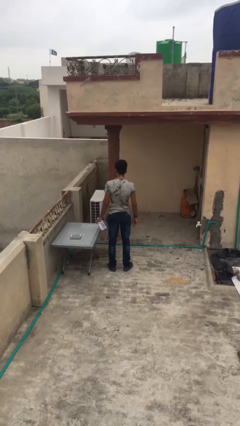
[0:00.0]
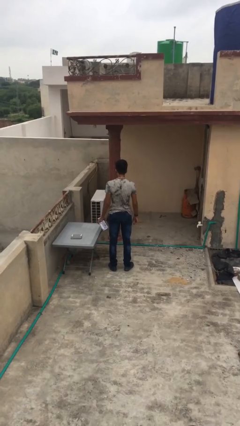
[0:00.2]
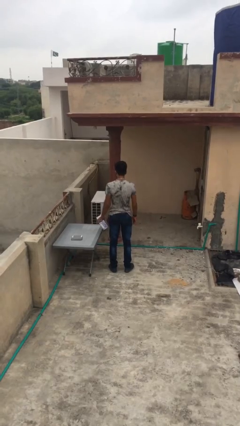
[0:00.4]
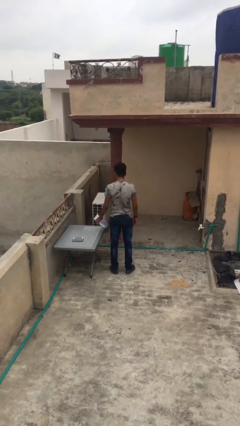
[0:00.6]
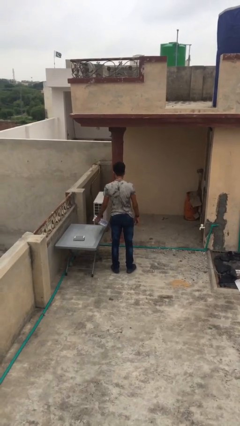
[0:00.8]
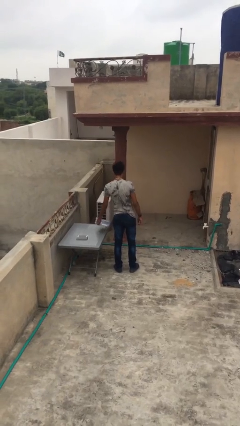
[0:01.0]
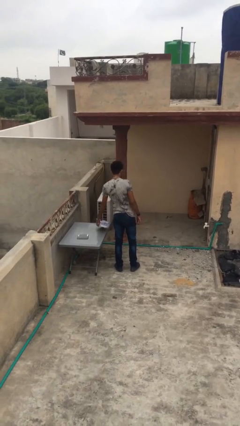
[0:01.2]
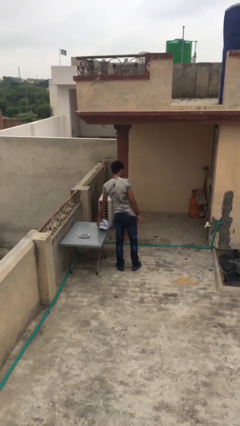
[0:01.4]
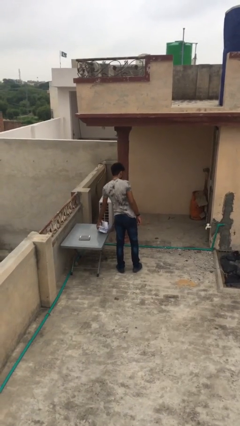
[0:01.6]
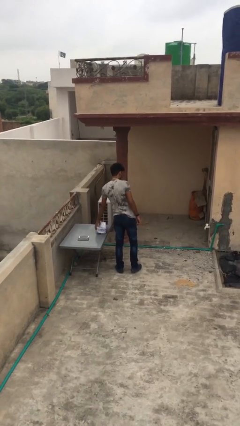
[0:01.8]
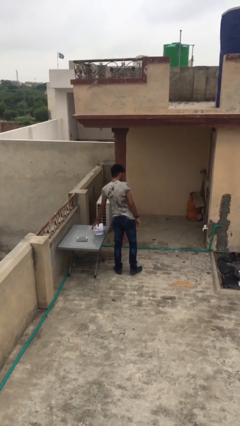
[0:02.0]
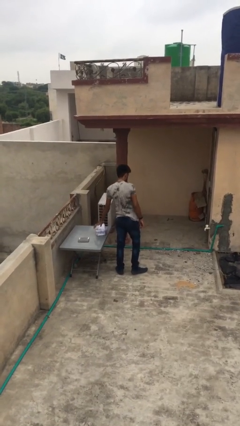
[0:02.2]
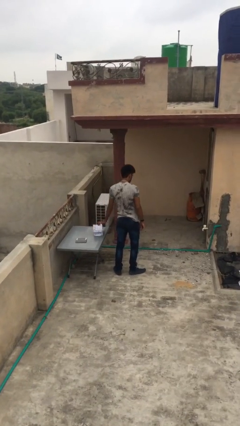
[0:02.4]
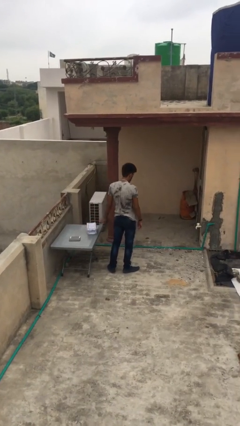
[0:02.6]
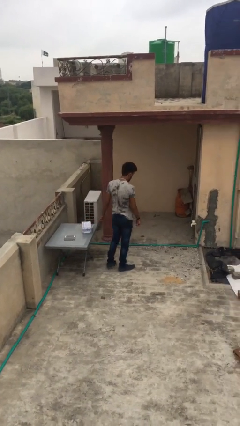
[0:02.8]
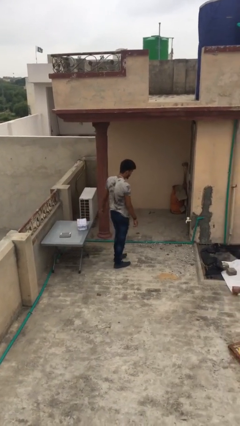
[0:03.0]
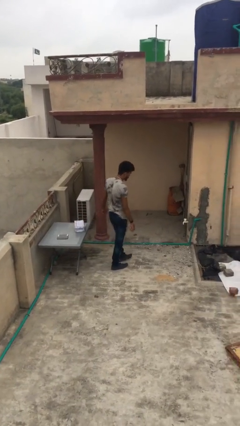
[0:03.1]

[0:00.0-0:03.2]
person puts down object on table

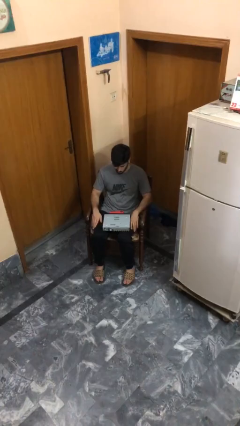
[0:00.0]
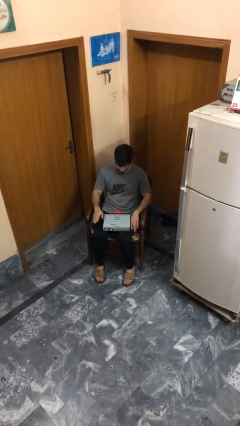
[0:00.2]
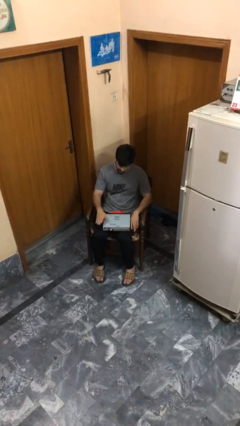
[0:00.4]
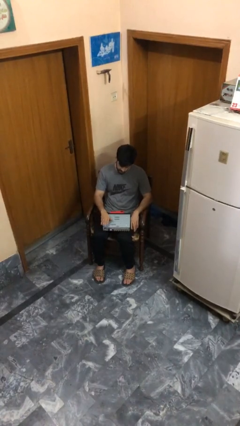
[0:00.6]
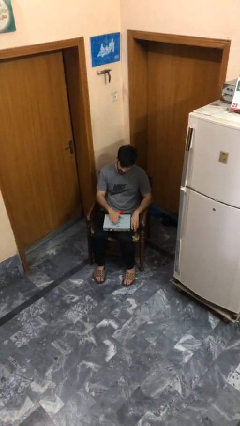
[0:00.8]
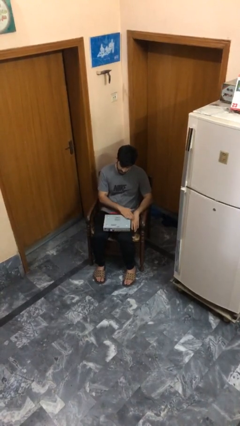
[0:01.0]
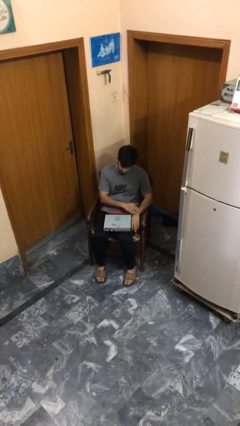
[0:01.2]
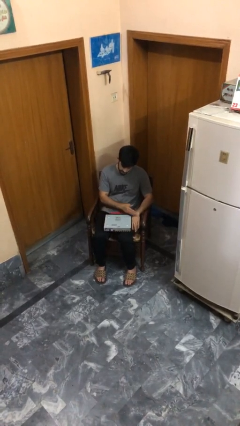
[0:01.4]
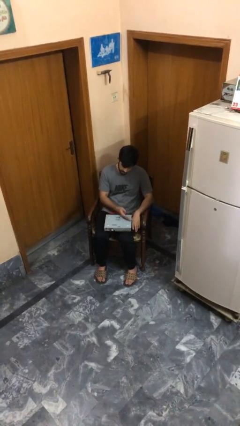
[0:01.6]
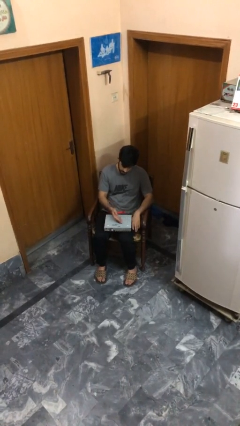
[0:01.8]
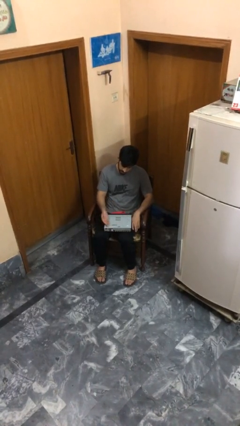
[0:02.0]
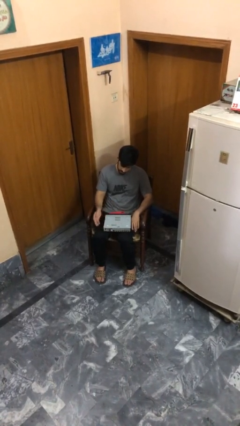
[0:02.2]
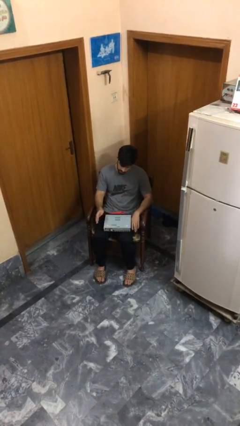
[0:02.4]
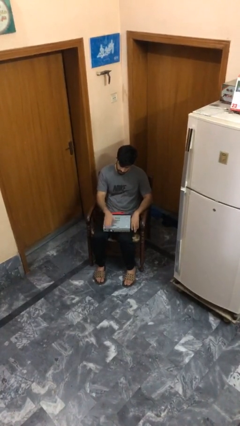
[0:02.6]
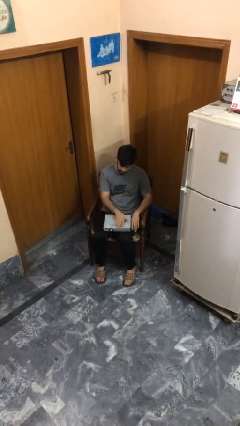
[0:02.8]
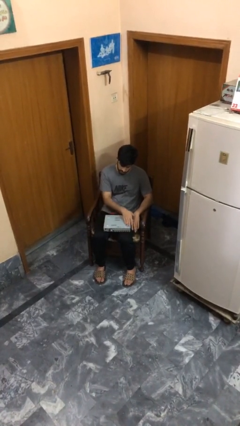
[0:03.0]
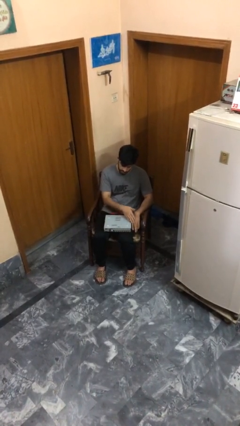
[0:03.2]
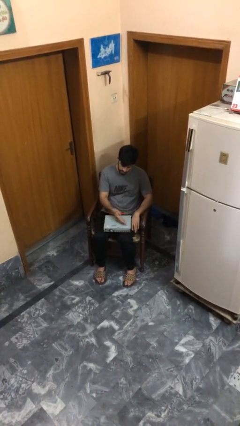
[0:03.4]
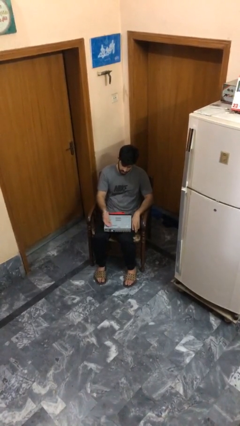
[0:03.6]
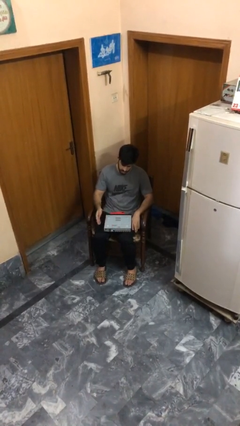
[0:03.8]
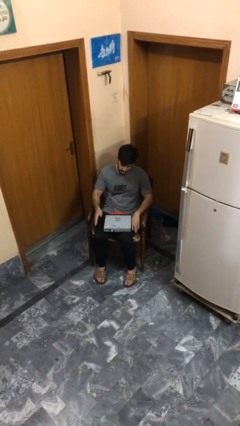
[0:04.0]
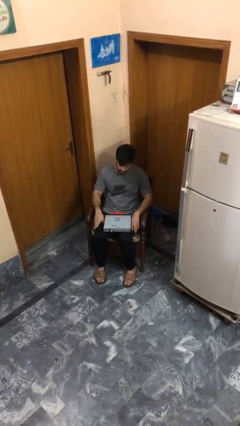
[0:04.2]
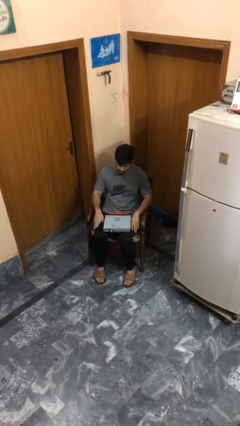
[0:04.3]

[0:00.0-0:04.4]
person waves hand over object

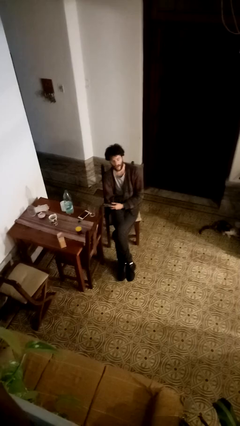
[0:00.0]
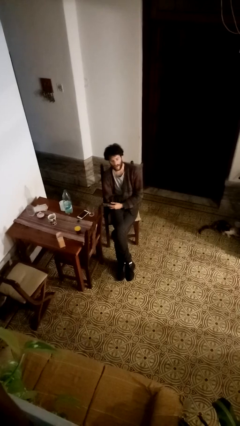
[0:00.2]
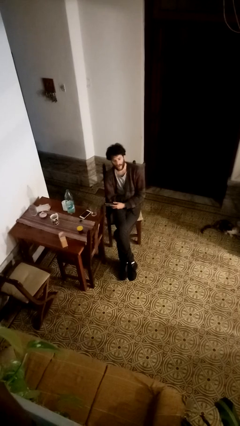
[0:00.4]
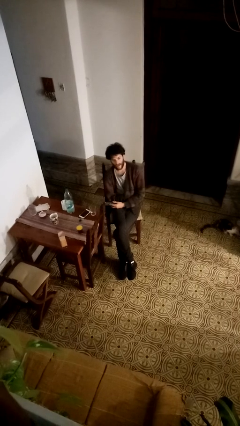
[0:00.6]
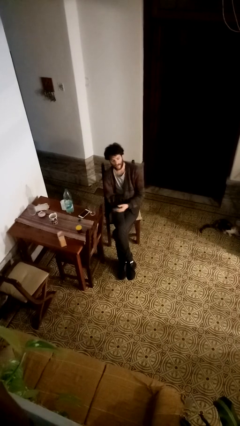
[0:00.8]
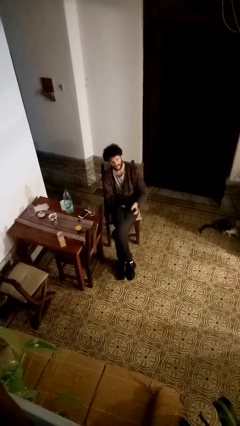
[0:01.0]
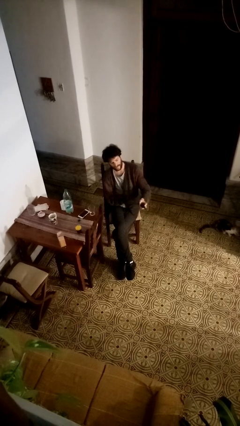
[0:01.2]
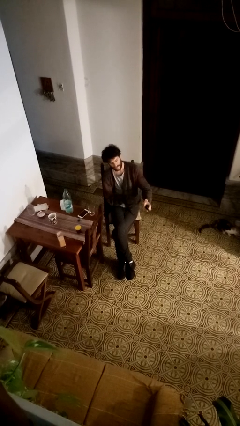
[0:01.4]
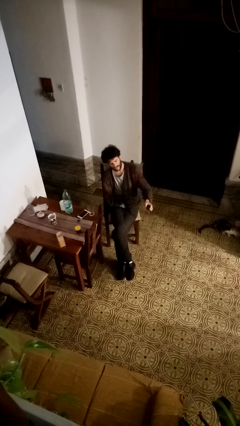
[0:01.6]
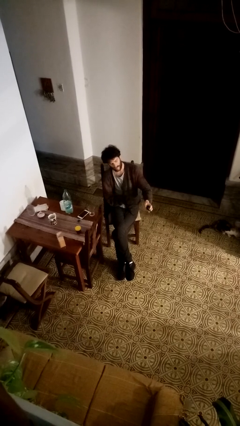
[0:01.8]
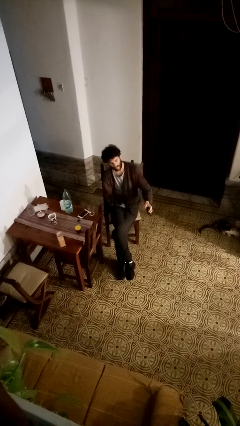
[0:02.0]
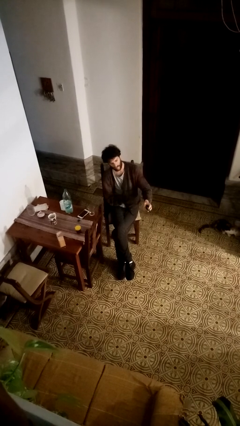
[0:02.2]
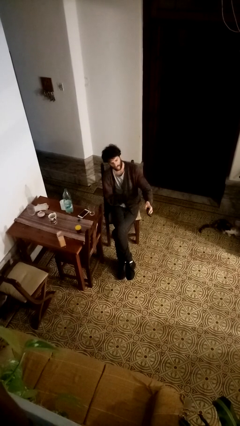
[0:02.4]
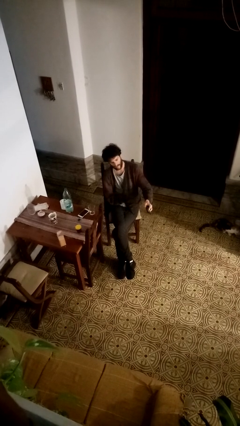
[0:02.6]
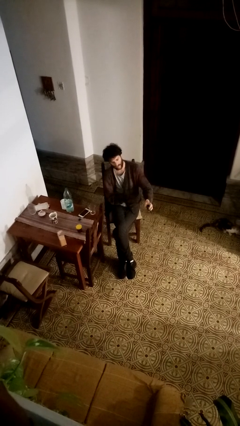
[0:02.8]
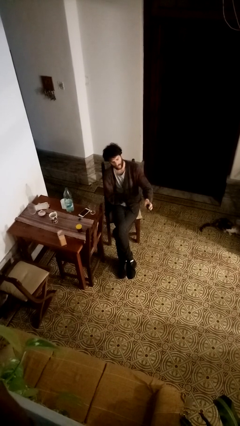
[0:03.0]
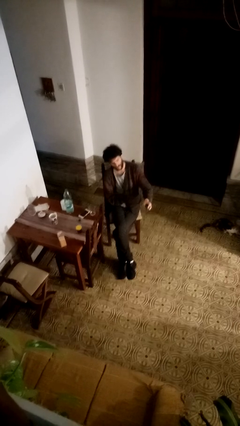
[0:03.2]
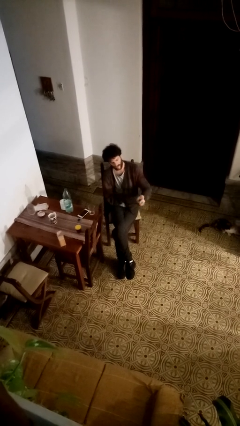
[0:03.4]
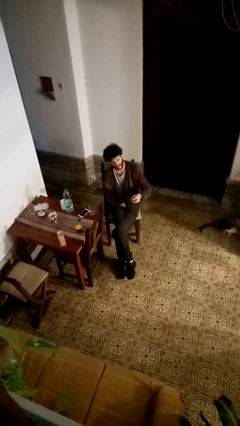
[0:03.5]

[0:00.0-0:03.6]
person uses television remote

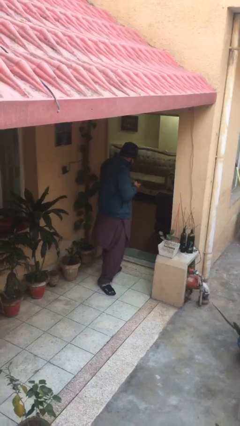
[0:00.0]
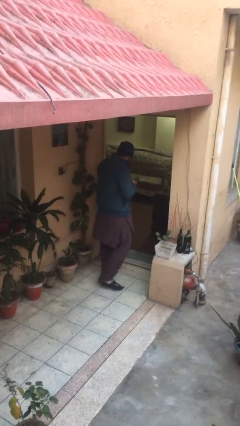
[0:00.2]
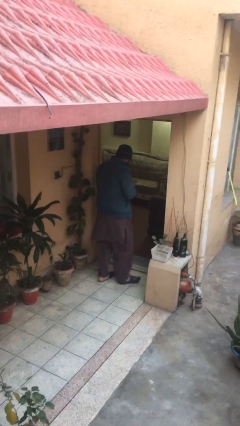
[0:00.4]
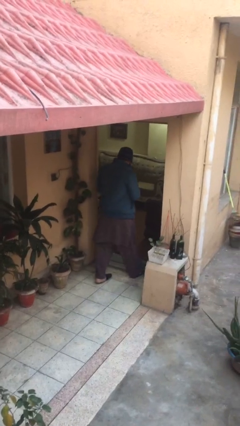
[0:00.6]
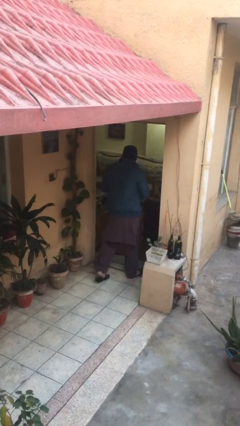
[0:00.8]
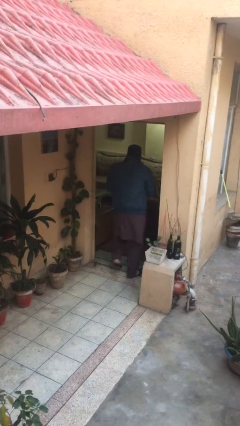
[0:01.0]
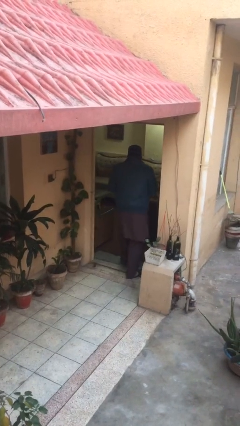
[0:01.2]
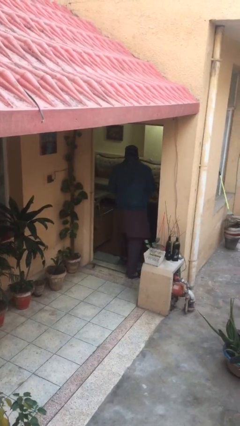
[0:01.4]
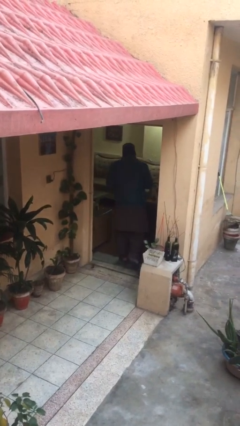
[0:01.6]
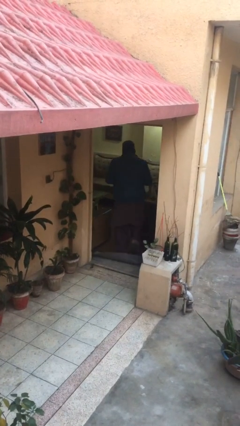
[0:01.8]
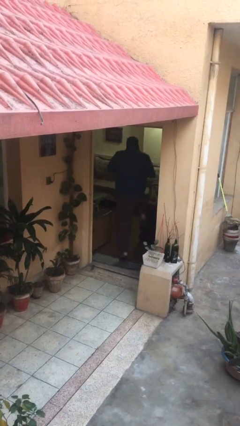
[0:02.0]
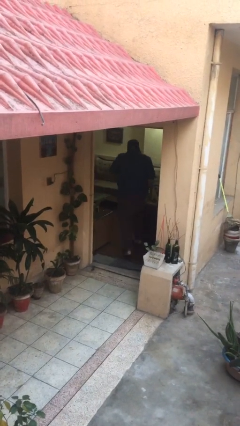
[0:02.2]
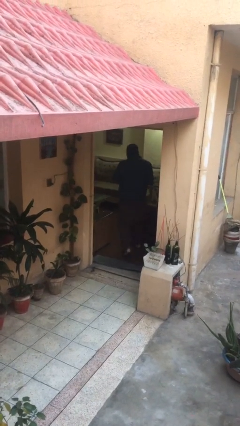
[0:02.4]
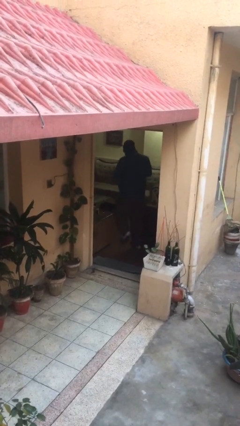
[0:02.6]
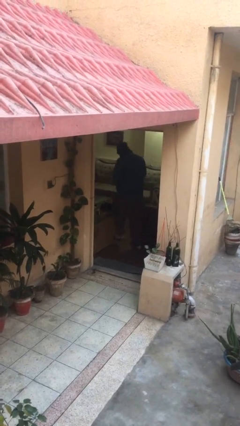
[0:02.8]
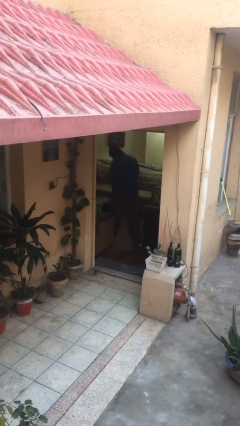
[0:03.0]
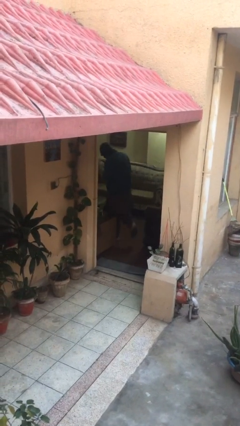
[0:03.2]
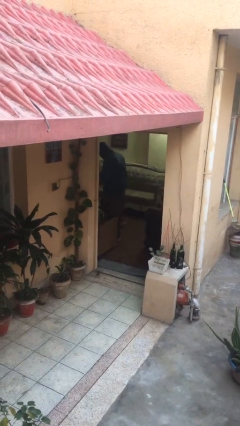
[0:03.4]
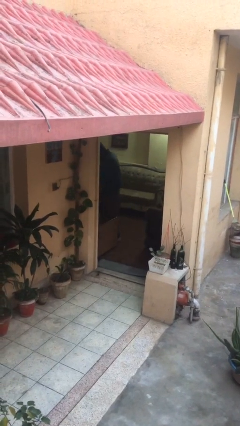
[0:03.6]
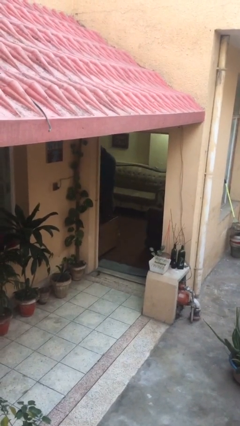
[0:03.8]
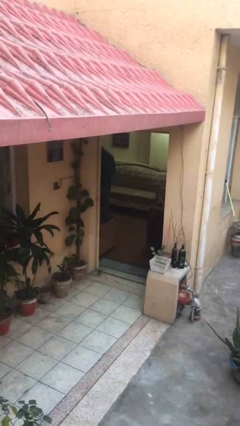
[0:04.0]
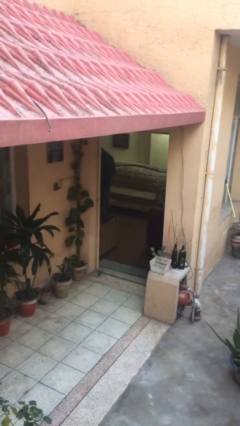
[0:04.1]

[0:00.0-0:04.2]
person exits scene through structure

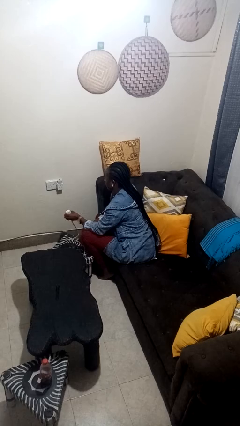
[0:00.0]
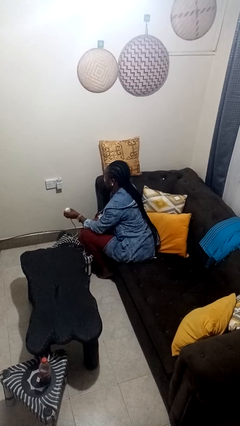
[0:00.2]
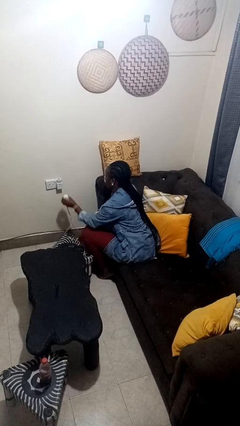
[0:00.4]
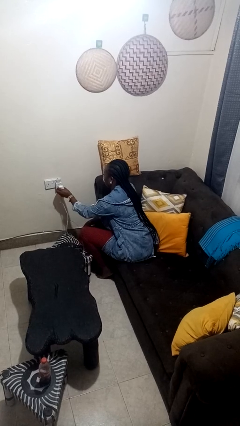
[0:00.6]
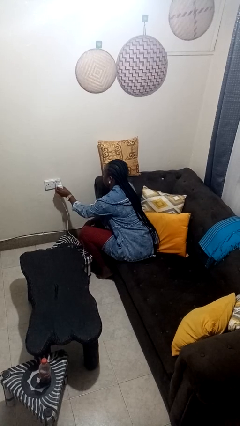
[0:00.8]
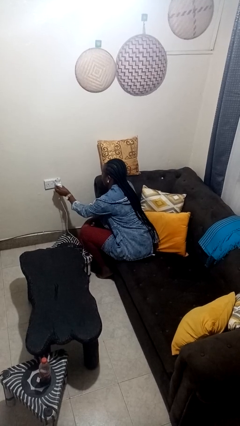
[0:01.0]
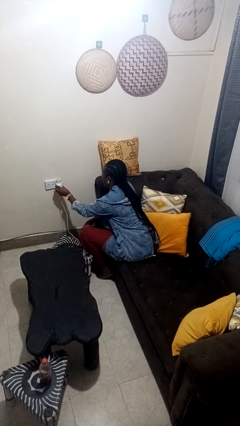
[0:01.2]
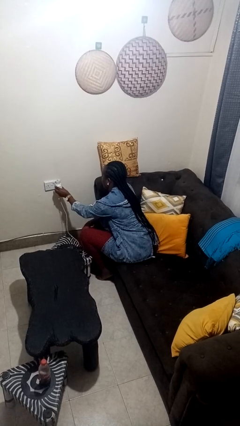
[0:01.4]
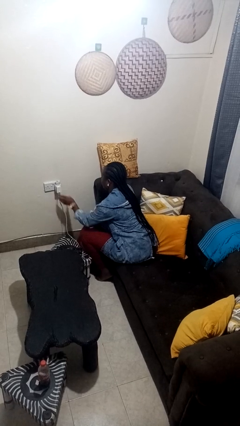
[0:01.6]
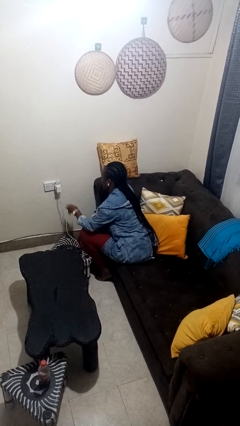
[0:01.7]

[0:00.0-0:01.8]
person plugs into electrical socket

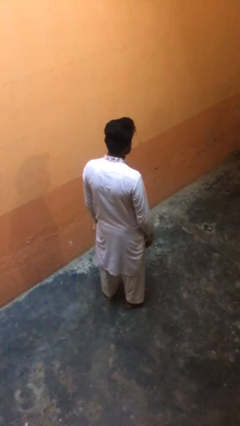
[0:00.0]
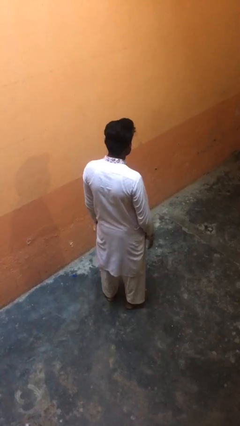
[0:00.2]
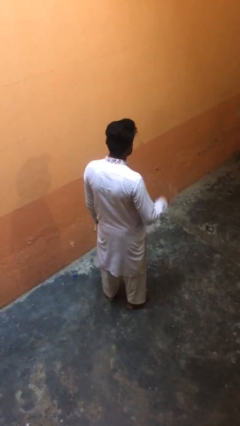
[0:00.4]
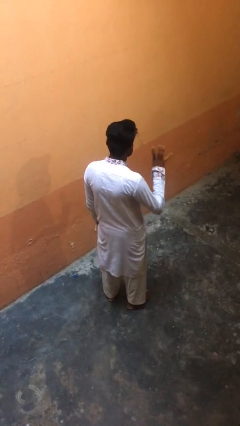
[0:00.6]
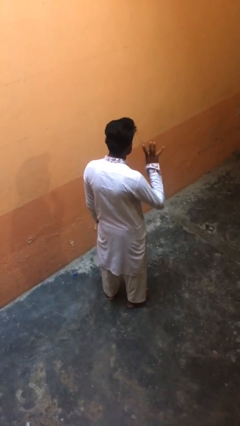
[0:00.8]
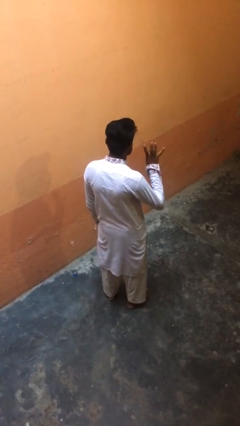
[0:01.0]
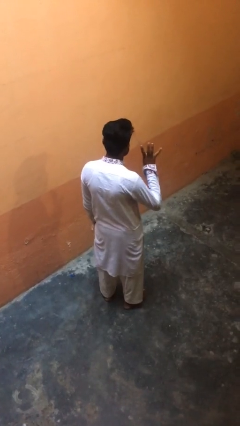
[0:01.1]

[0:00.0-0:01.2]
person gestures number four
